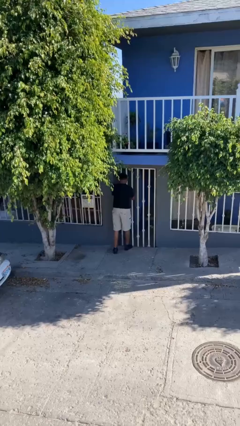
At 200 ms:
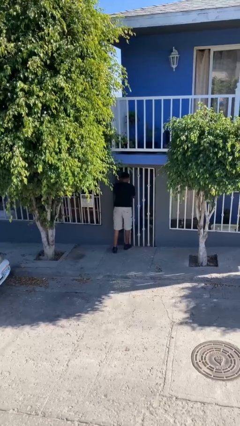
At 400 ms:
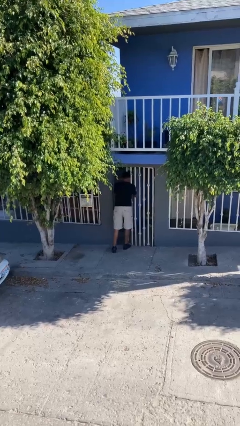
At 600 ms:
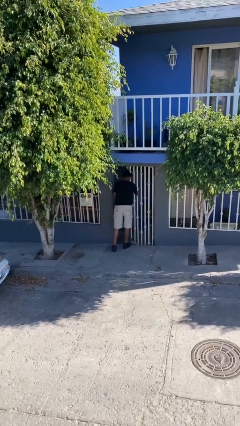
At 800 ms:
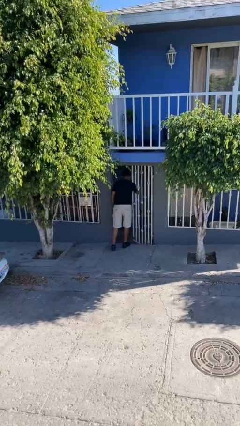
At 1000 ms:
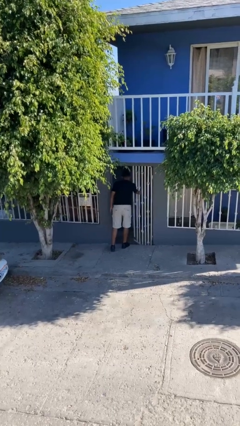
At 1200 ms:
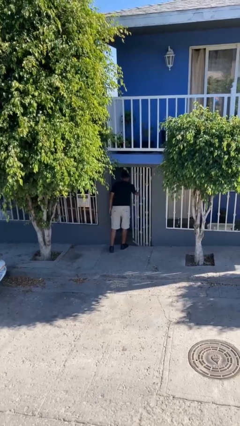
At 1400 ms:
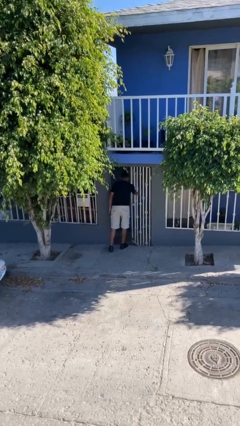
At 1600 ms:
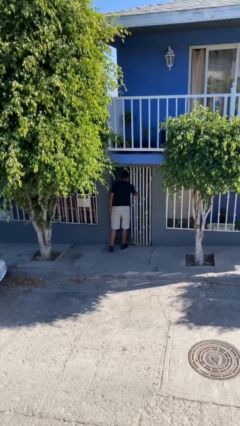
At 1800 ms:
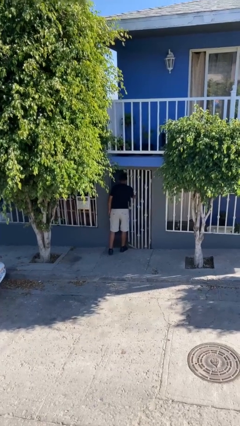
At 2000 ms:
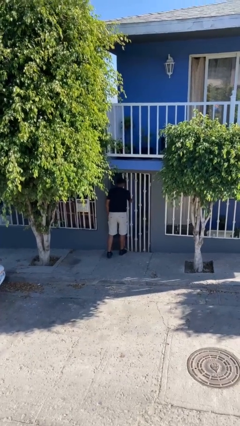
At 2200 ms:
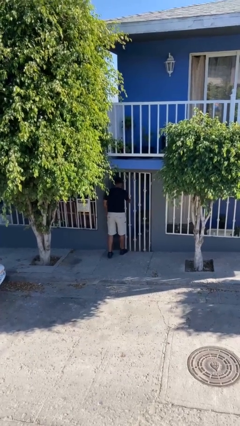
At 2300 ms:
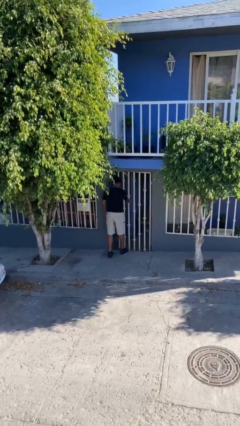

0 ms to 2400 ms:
person opens facility door

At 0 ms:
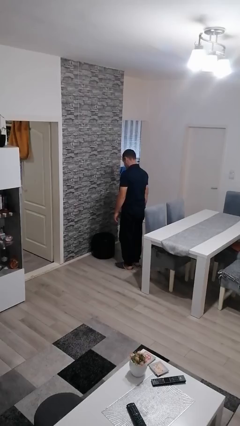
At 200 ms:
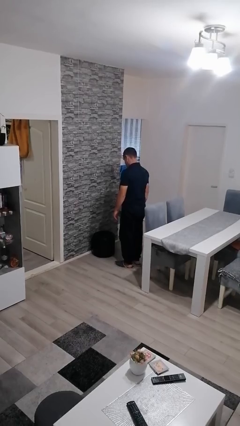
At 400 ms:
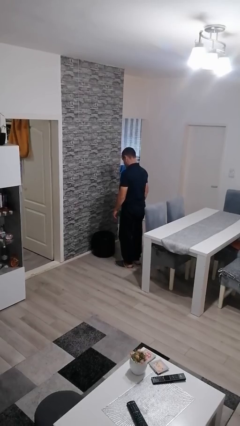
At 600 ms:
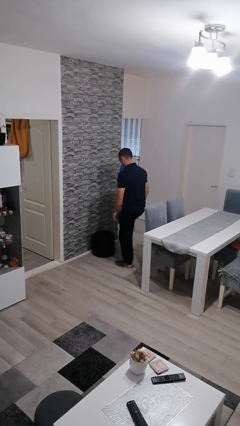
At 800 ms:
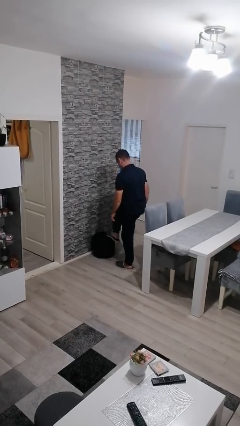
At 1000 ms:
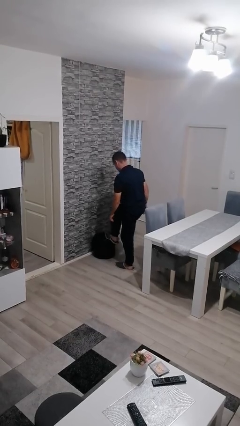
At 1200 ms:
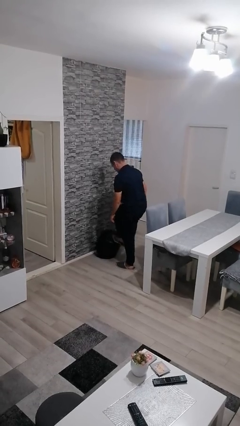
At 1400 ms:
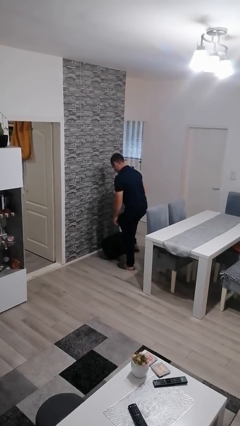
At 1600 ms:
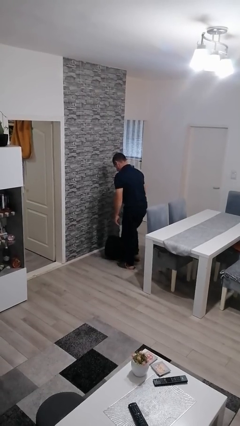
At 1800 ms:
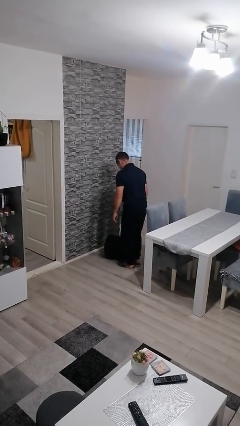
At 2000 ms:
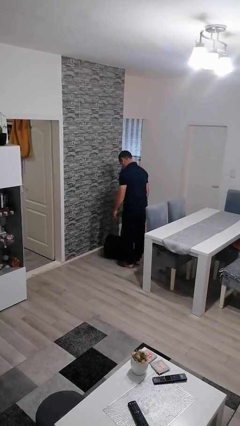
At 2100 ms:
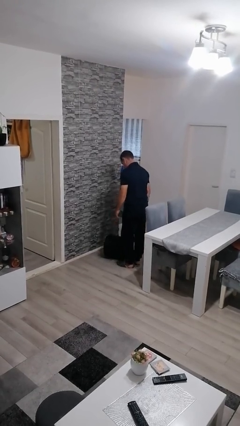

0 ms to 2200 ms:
person knocks over furniture

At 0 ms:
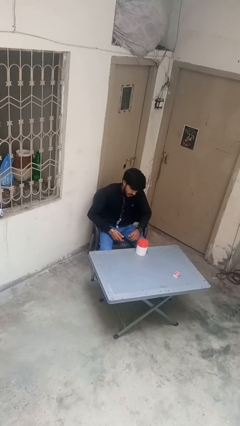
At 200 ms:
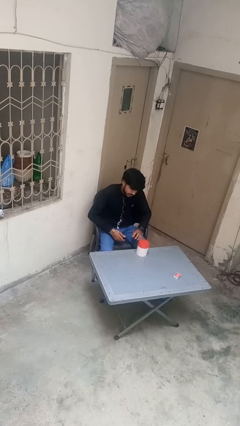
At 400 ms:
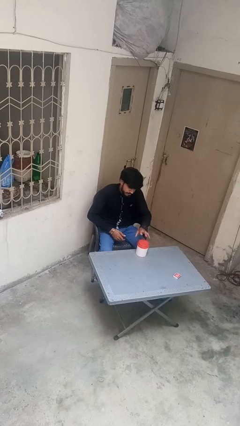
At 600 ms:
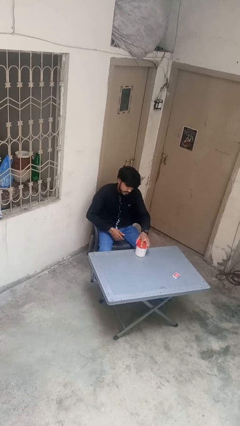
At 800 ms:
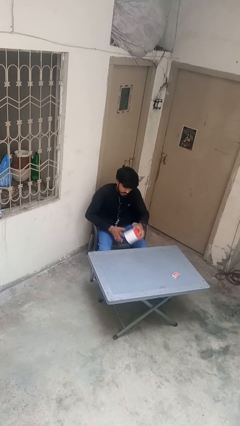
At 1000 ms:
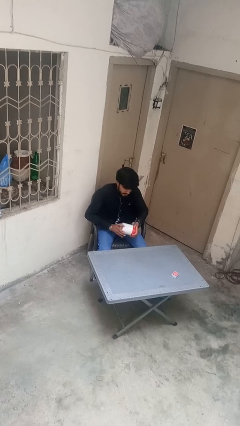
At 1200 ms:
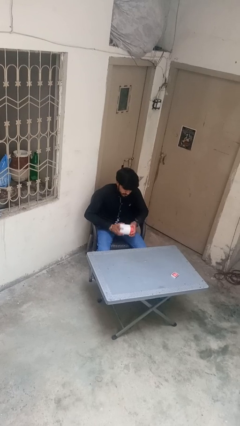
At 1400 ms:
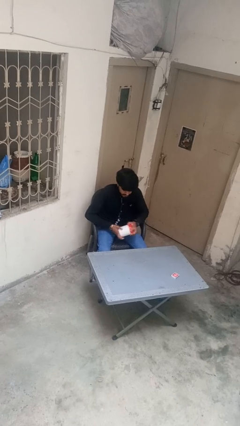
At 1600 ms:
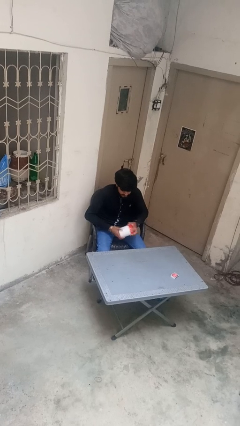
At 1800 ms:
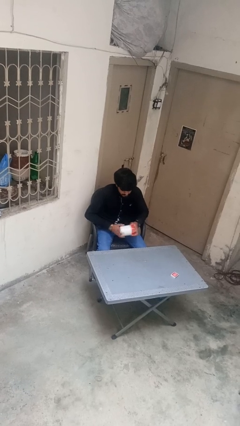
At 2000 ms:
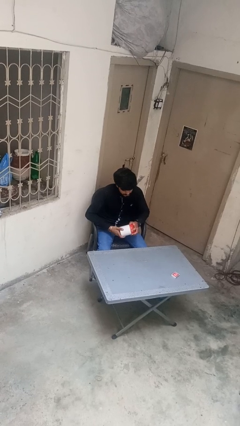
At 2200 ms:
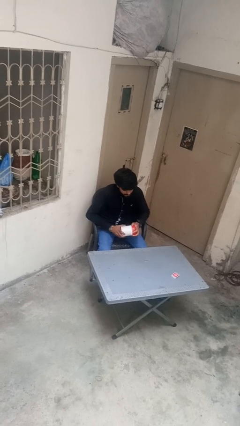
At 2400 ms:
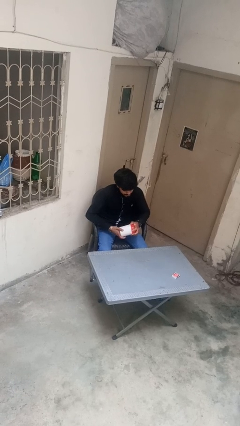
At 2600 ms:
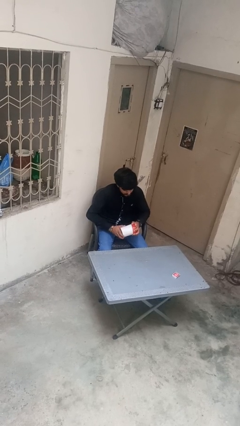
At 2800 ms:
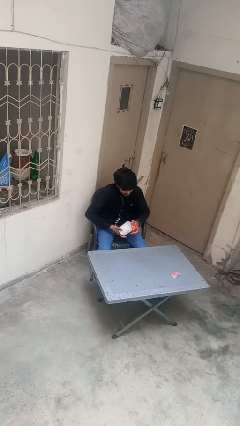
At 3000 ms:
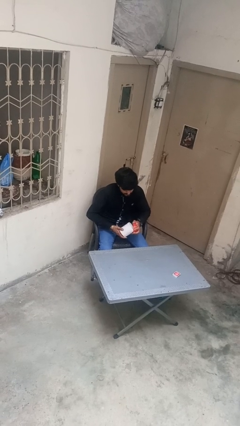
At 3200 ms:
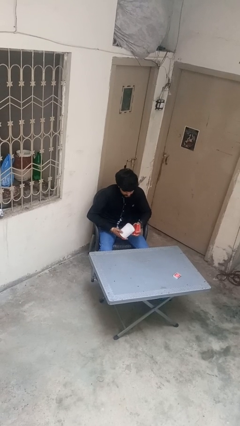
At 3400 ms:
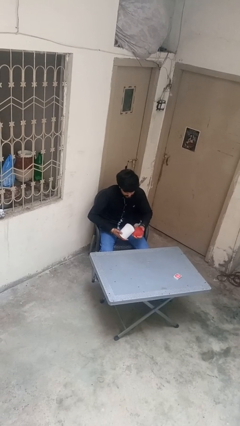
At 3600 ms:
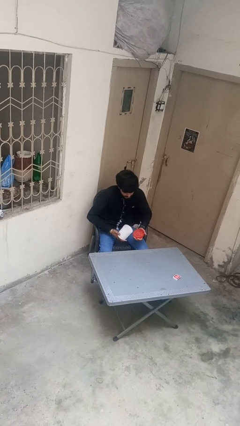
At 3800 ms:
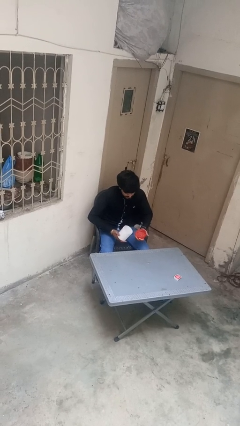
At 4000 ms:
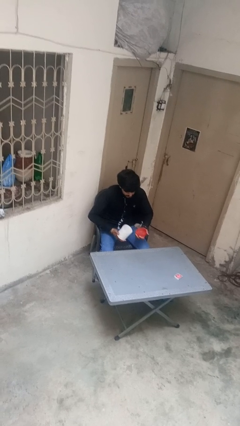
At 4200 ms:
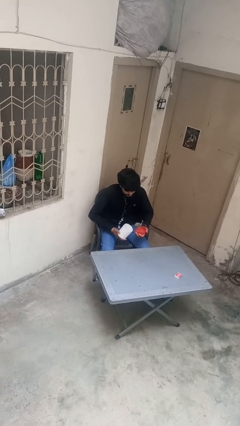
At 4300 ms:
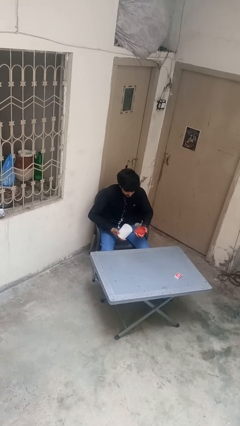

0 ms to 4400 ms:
person opens jar

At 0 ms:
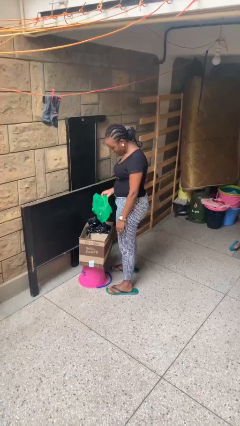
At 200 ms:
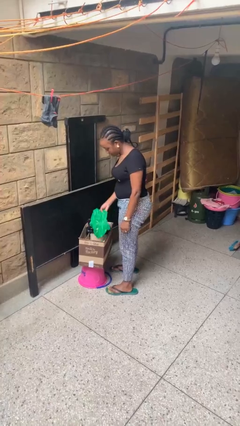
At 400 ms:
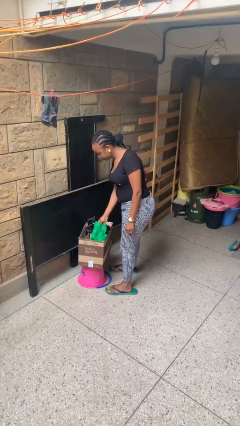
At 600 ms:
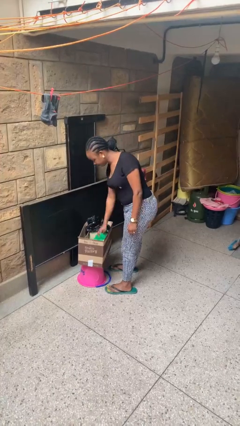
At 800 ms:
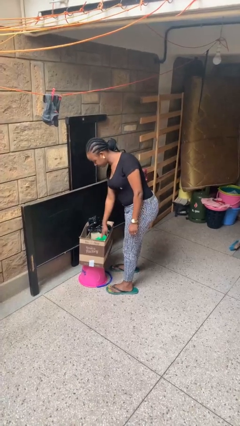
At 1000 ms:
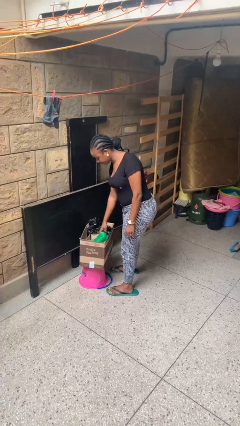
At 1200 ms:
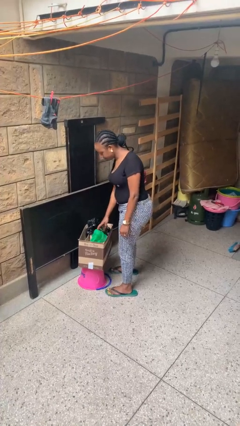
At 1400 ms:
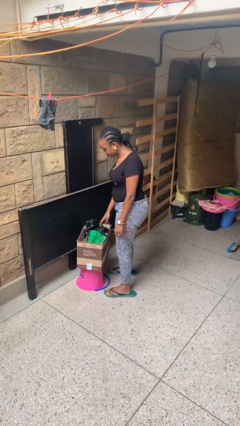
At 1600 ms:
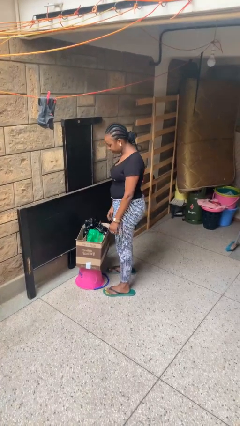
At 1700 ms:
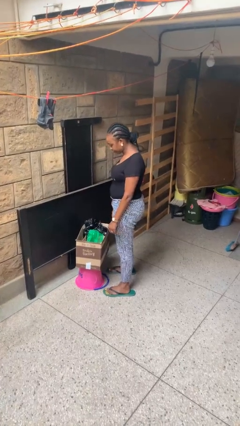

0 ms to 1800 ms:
person puts object into box

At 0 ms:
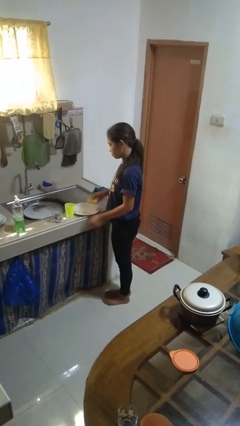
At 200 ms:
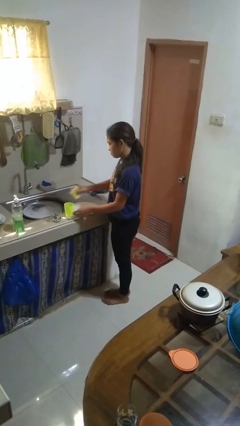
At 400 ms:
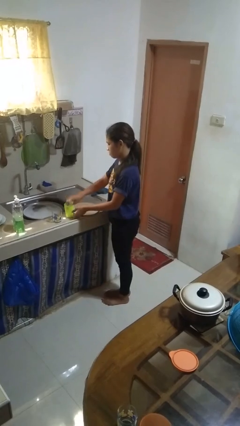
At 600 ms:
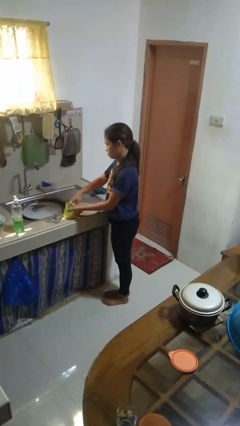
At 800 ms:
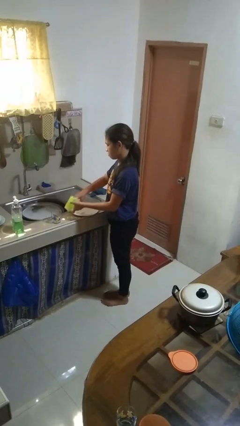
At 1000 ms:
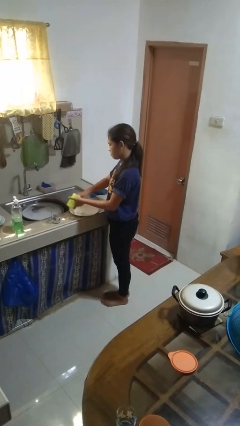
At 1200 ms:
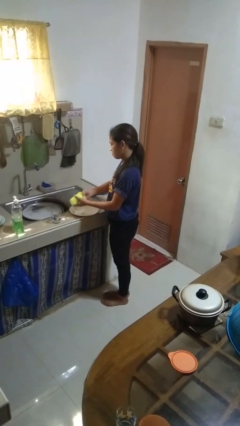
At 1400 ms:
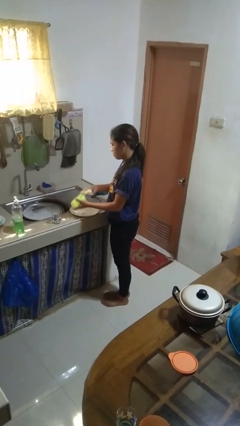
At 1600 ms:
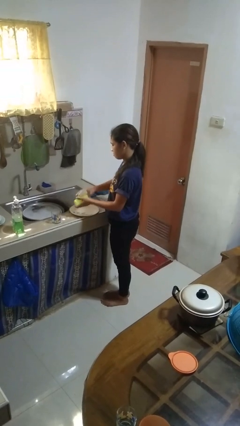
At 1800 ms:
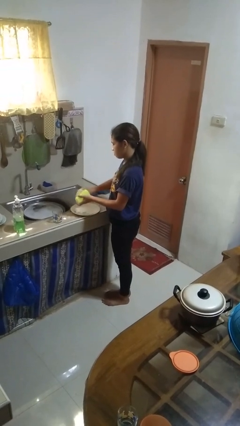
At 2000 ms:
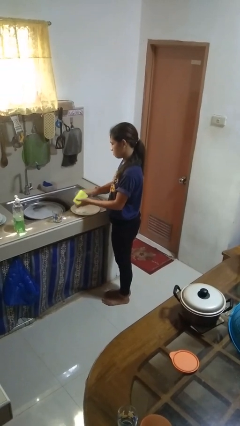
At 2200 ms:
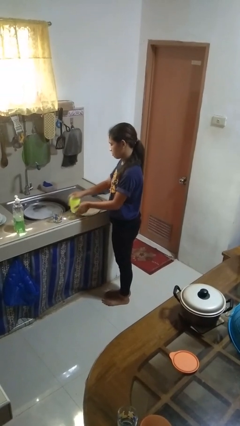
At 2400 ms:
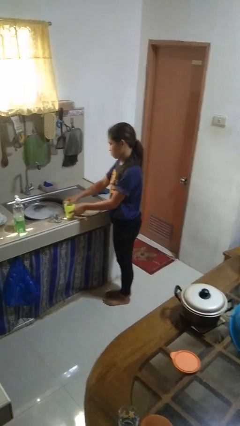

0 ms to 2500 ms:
person washes dish

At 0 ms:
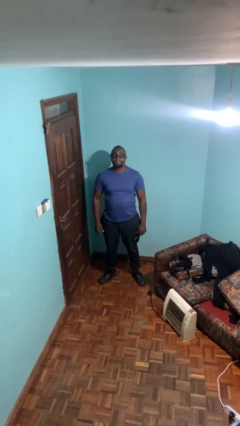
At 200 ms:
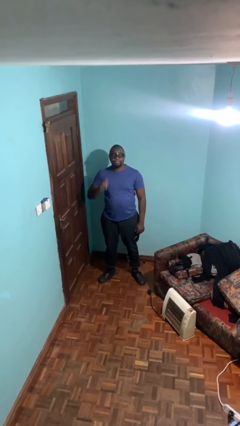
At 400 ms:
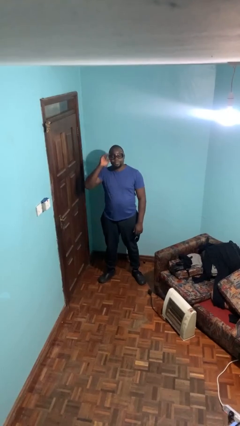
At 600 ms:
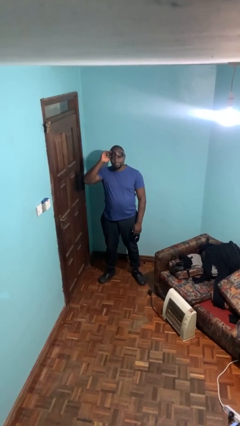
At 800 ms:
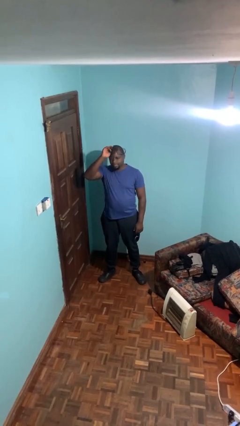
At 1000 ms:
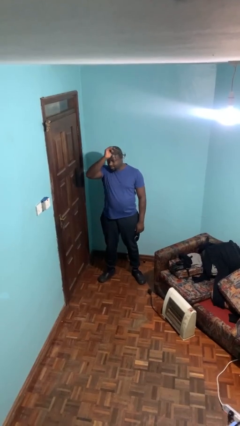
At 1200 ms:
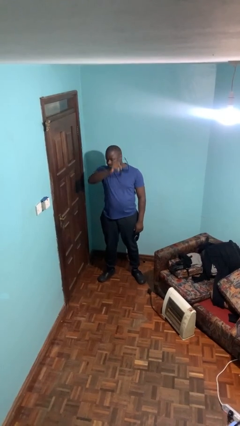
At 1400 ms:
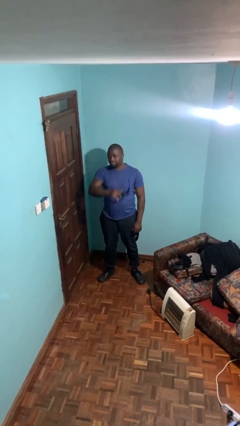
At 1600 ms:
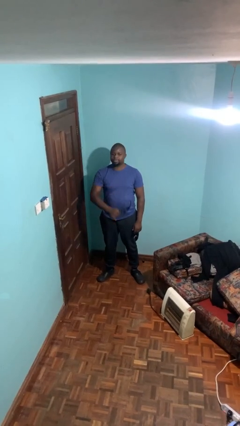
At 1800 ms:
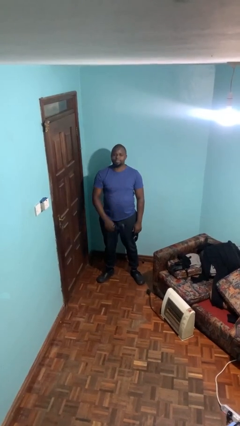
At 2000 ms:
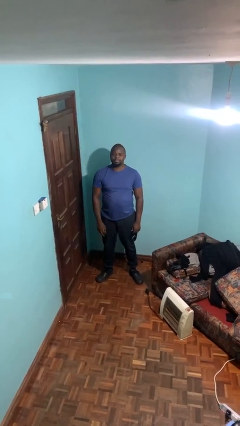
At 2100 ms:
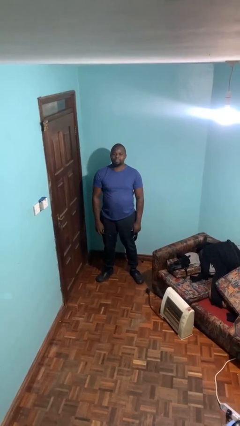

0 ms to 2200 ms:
person takes off glasses

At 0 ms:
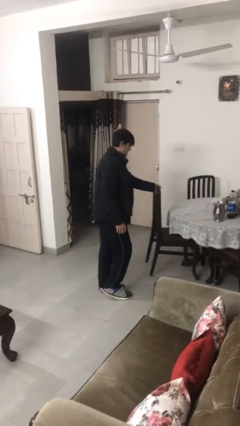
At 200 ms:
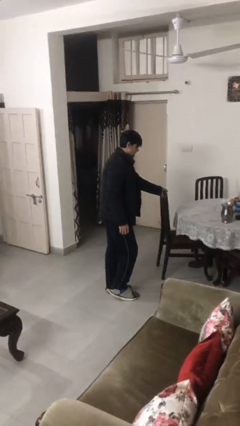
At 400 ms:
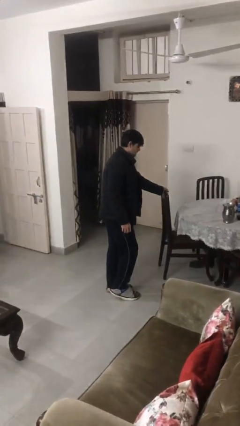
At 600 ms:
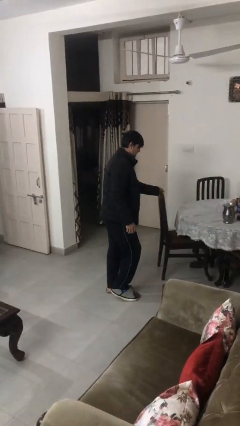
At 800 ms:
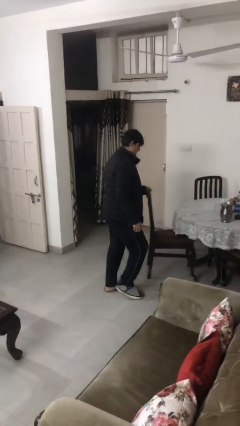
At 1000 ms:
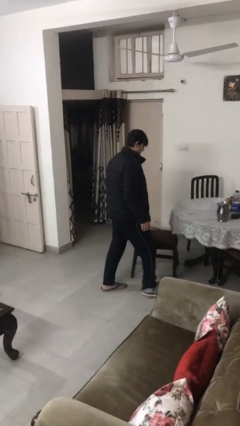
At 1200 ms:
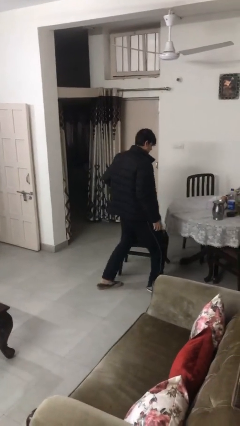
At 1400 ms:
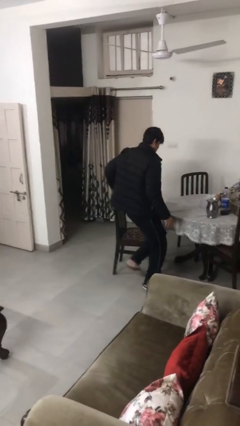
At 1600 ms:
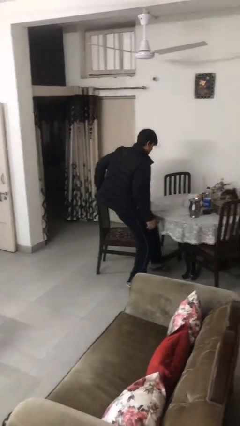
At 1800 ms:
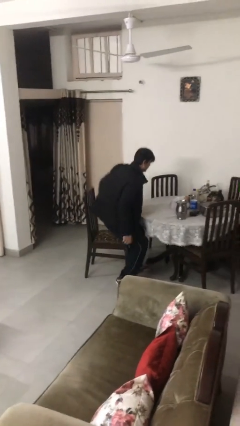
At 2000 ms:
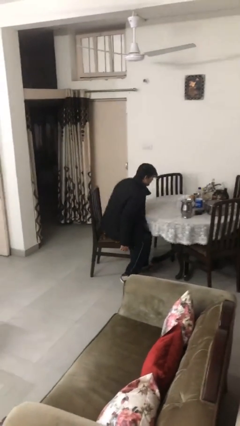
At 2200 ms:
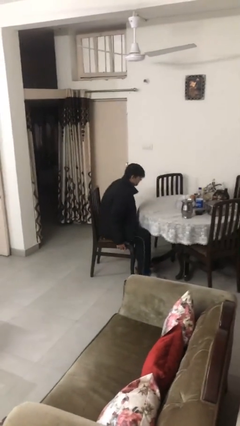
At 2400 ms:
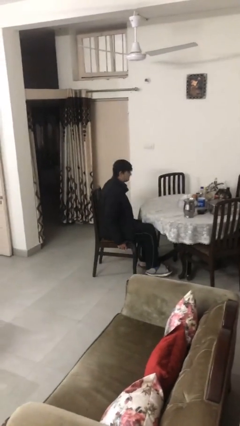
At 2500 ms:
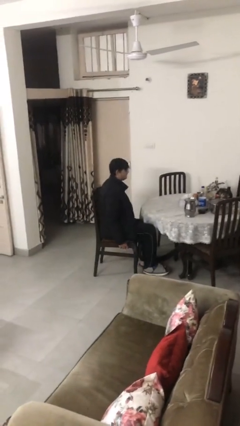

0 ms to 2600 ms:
person sits down
